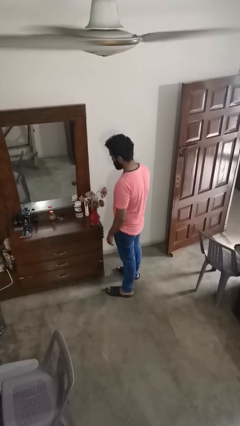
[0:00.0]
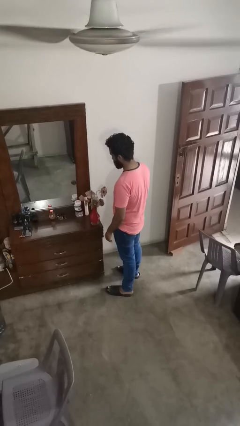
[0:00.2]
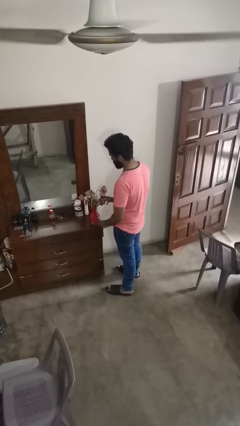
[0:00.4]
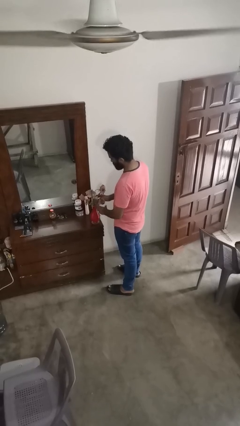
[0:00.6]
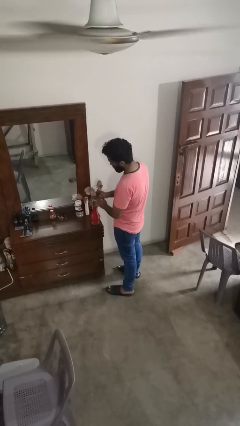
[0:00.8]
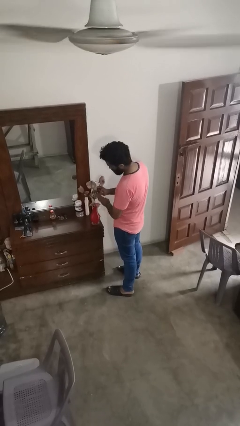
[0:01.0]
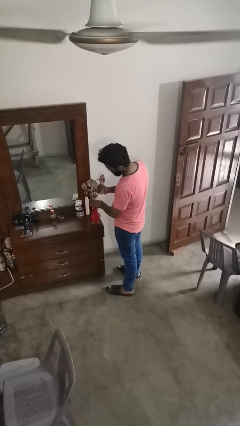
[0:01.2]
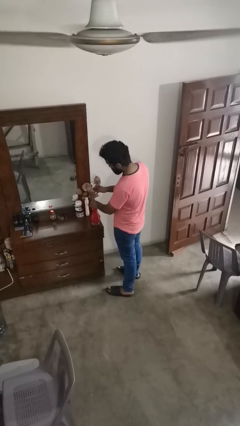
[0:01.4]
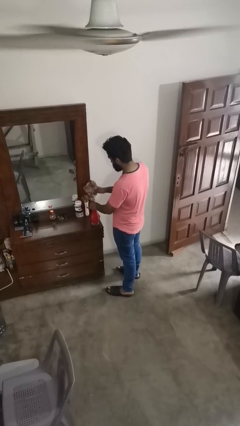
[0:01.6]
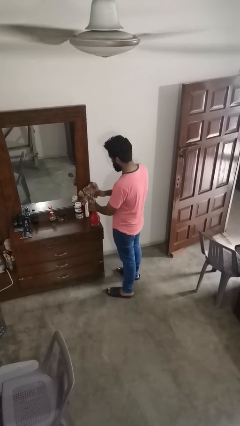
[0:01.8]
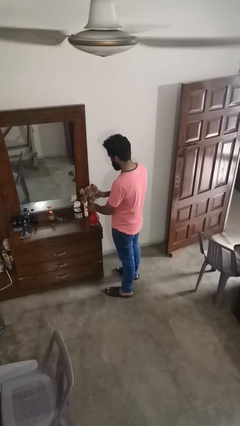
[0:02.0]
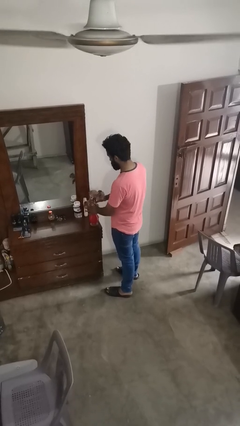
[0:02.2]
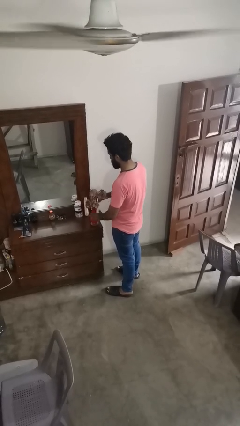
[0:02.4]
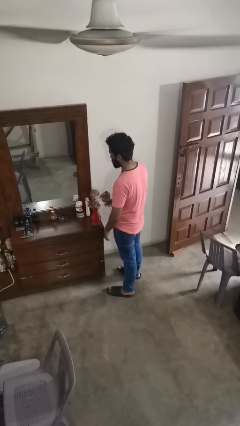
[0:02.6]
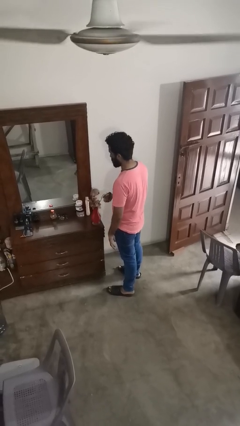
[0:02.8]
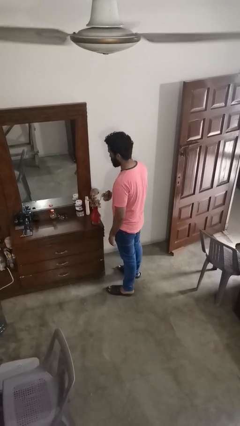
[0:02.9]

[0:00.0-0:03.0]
person arranges flowers in vase

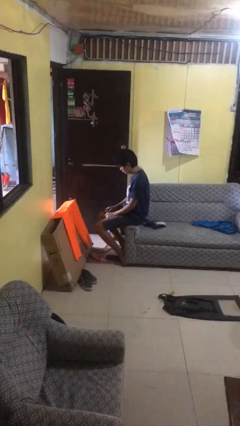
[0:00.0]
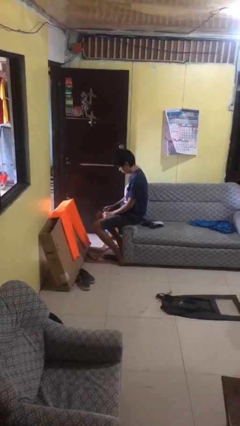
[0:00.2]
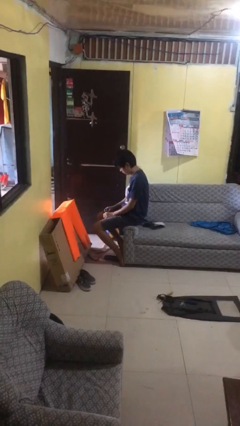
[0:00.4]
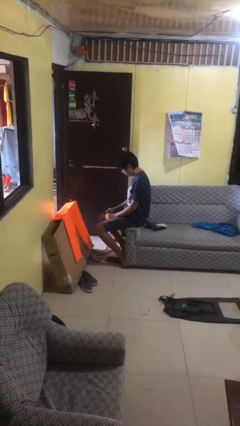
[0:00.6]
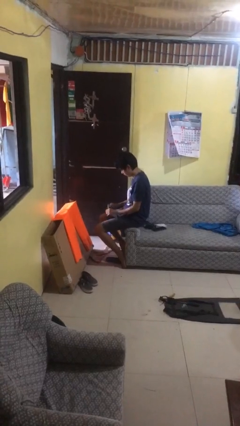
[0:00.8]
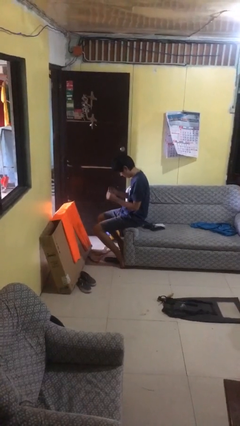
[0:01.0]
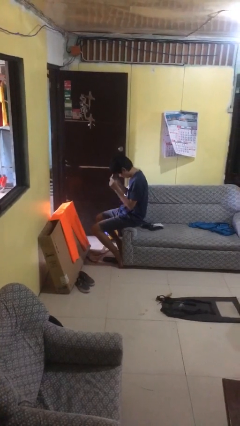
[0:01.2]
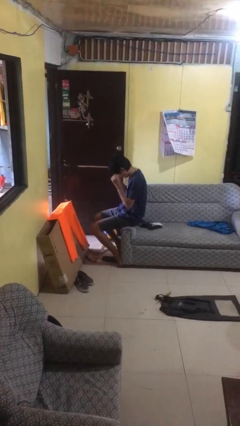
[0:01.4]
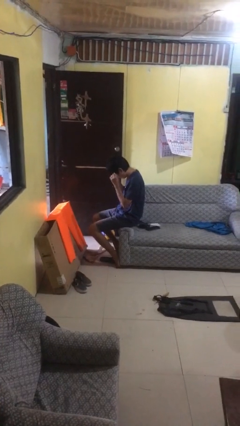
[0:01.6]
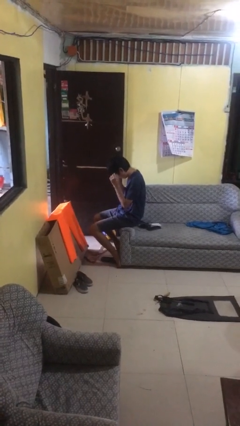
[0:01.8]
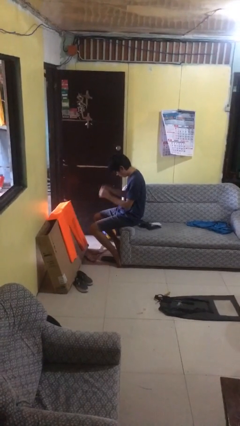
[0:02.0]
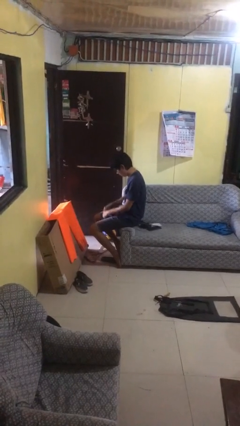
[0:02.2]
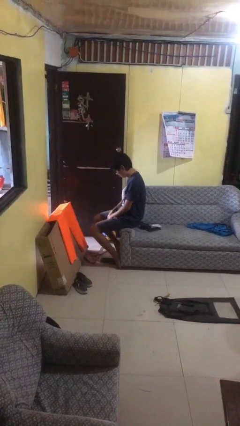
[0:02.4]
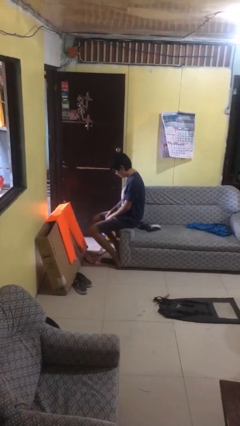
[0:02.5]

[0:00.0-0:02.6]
person puts on glasses

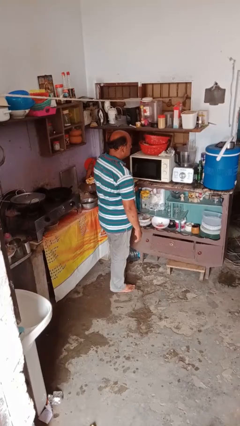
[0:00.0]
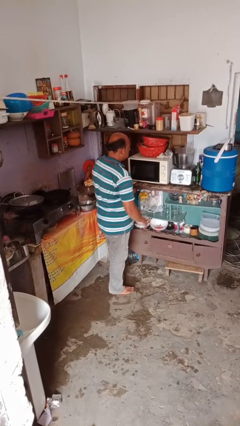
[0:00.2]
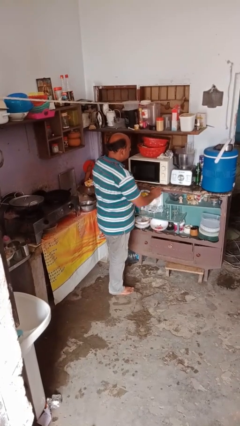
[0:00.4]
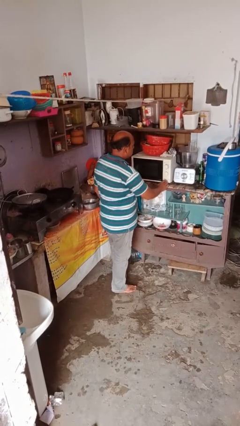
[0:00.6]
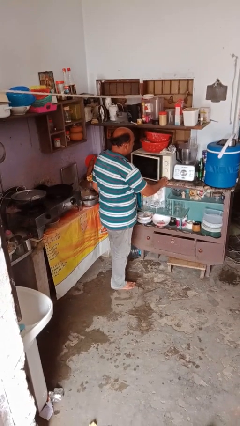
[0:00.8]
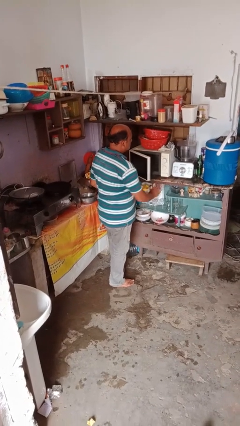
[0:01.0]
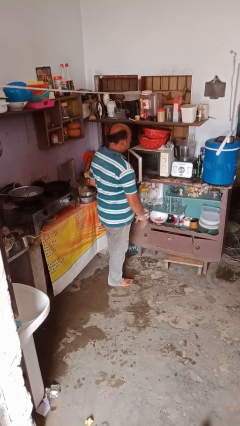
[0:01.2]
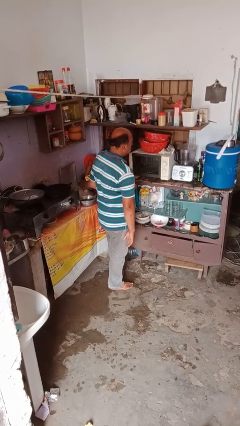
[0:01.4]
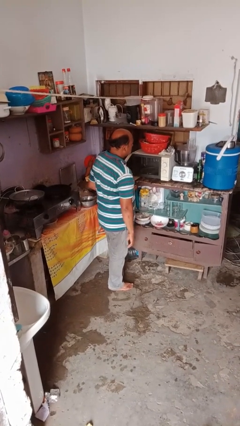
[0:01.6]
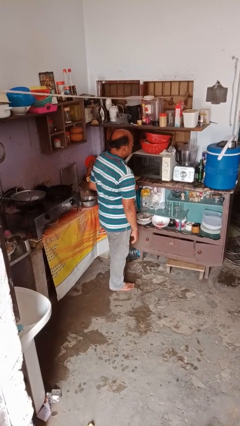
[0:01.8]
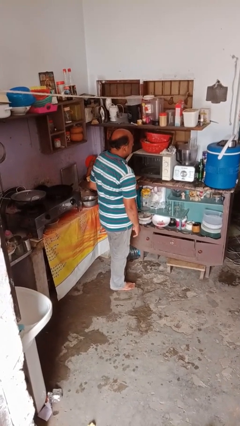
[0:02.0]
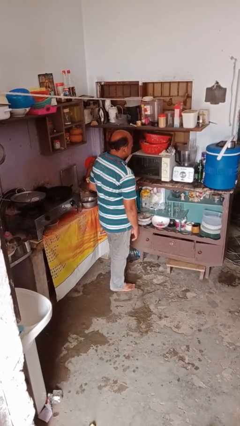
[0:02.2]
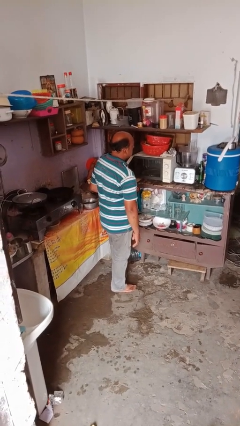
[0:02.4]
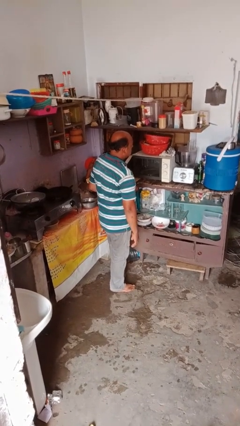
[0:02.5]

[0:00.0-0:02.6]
person opens microwave

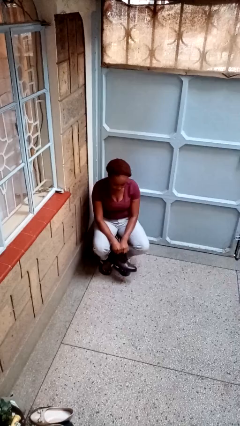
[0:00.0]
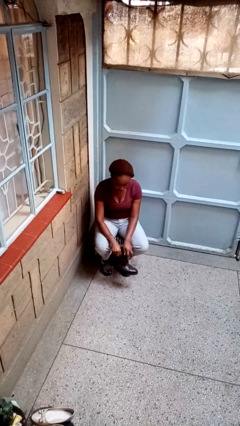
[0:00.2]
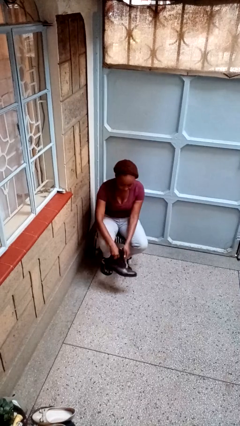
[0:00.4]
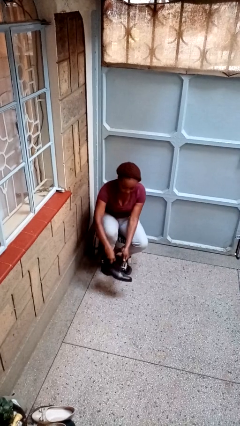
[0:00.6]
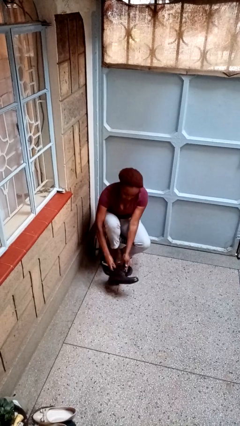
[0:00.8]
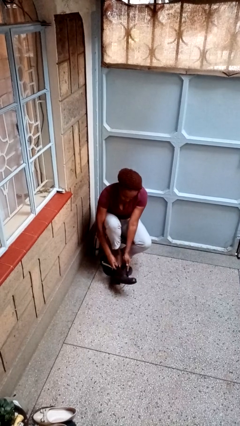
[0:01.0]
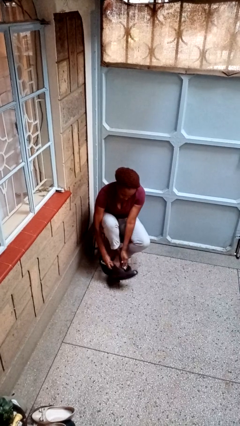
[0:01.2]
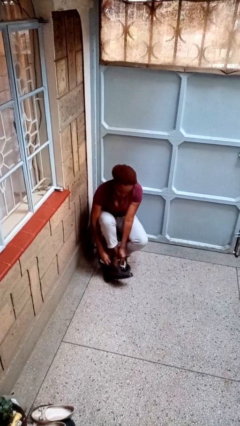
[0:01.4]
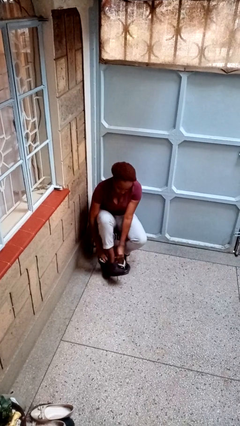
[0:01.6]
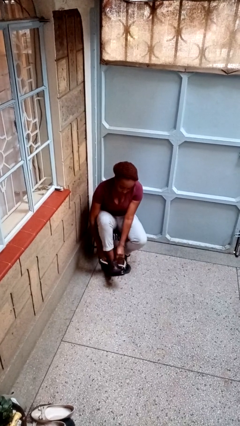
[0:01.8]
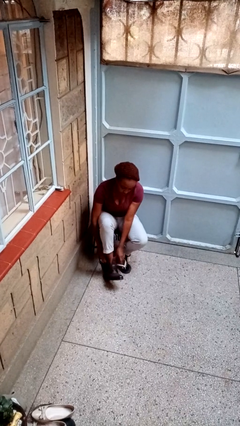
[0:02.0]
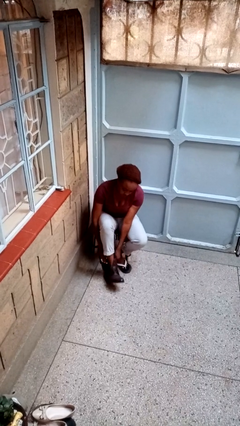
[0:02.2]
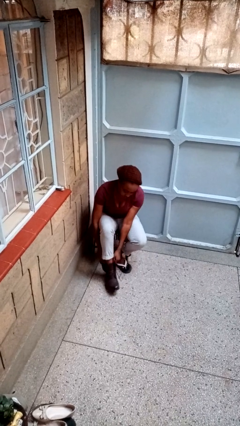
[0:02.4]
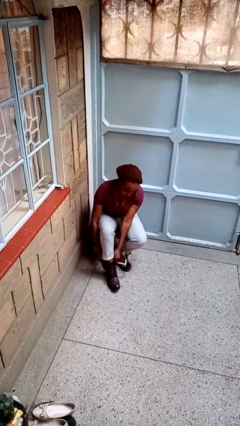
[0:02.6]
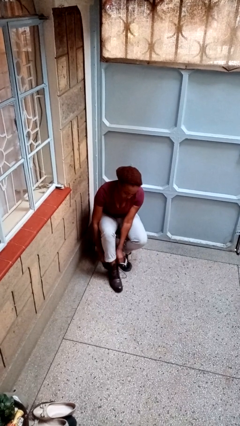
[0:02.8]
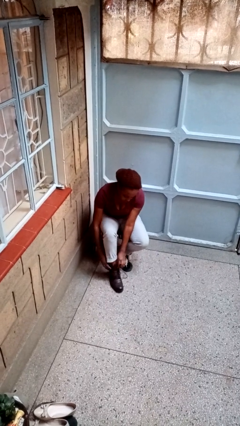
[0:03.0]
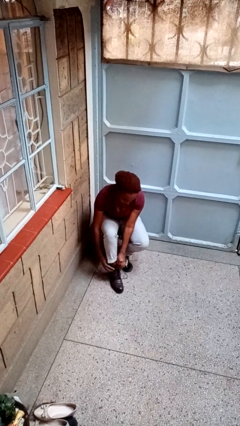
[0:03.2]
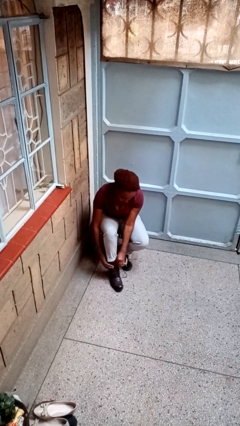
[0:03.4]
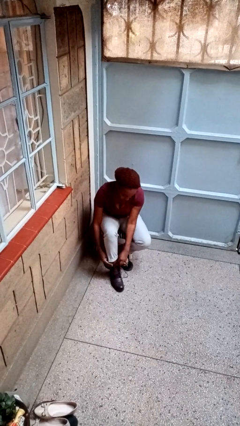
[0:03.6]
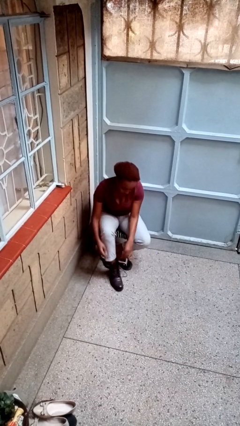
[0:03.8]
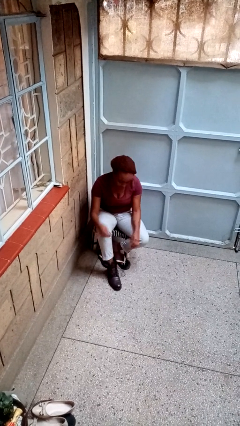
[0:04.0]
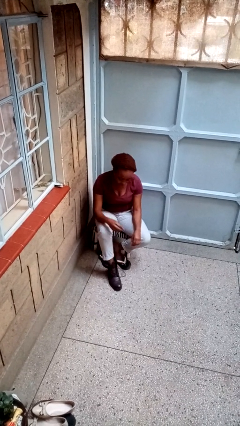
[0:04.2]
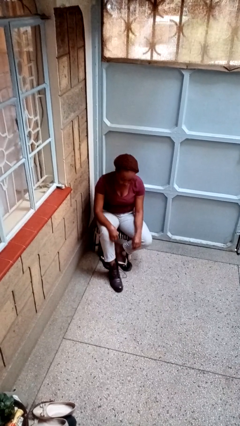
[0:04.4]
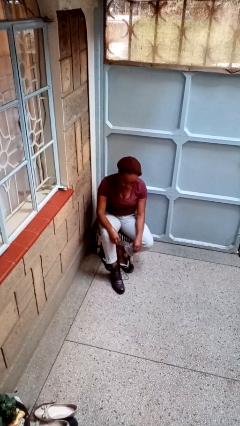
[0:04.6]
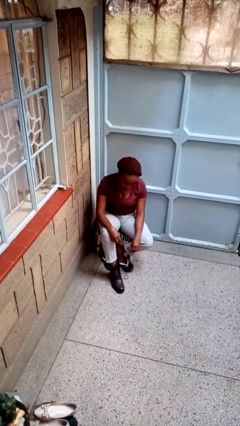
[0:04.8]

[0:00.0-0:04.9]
person puts on boots

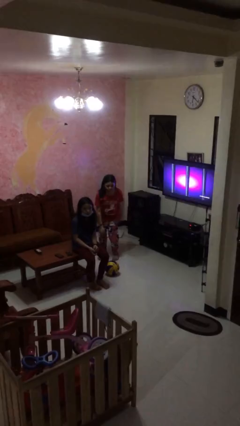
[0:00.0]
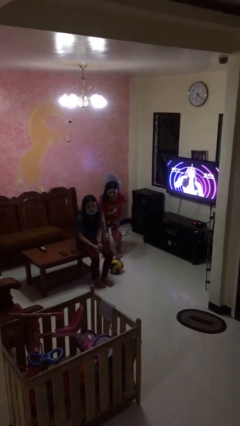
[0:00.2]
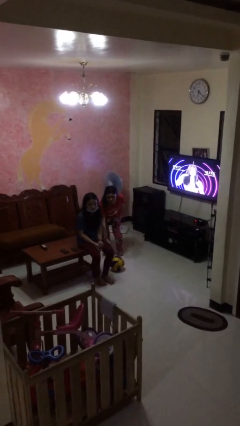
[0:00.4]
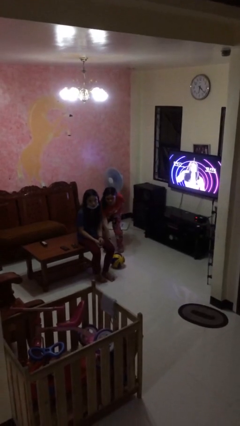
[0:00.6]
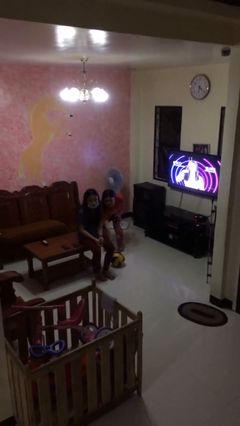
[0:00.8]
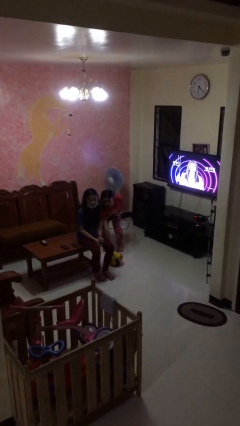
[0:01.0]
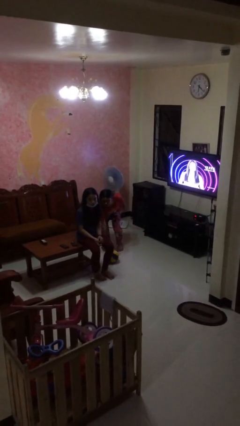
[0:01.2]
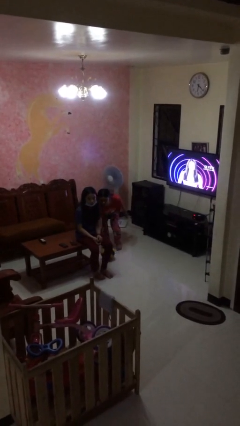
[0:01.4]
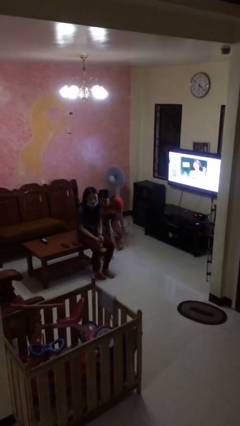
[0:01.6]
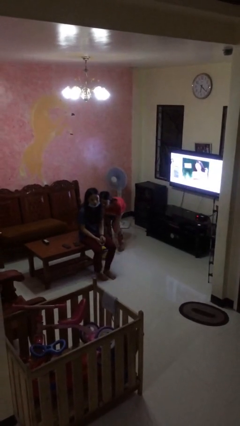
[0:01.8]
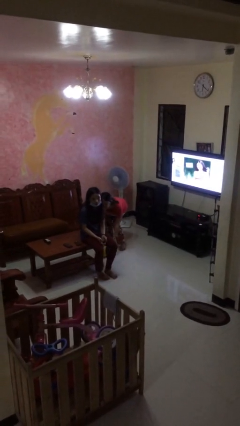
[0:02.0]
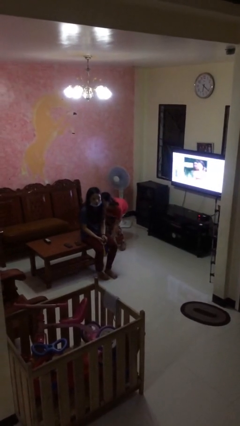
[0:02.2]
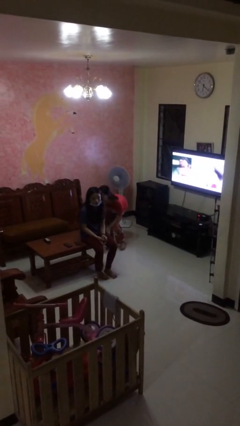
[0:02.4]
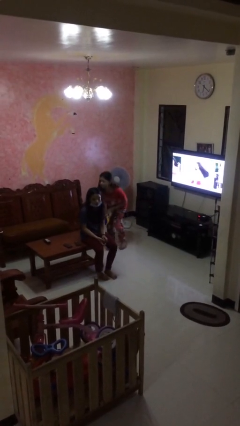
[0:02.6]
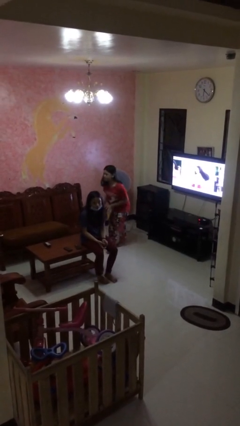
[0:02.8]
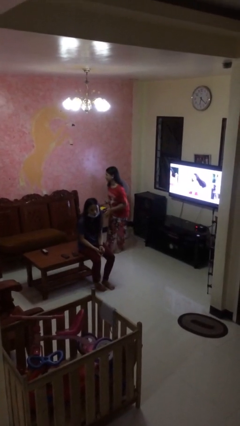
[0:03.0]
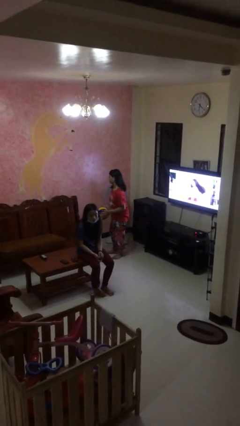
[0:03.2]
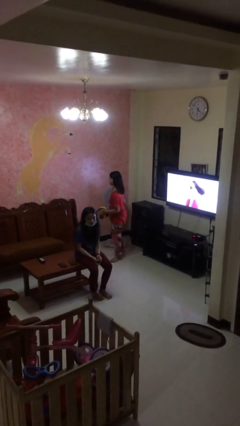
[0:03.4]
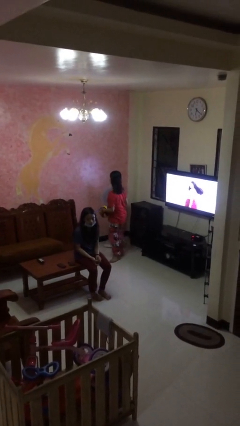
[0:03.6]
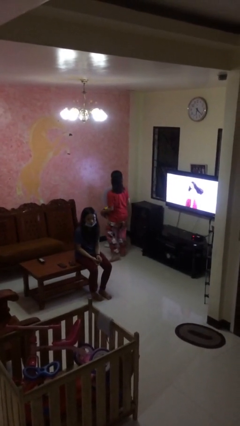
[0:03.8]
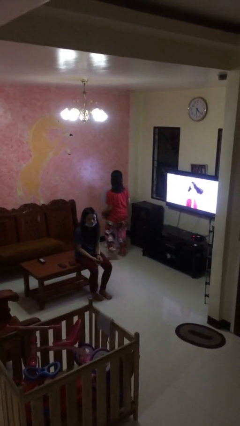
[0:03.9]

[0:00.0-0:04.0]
person steals object from person

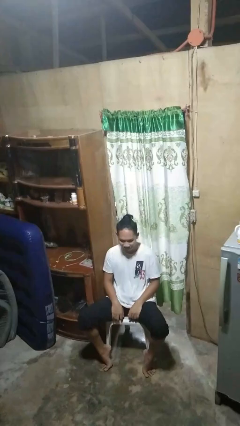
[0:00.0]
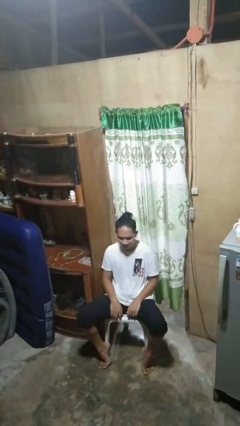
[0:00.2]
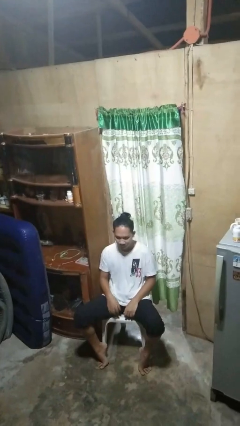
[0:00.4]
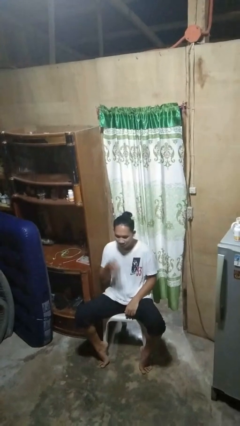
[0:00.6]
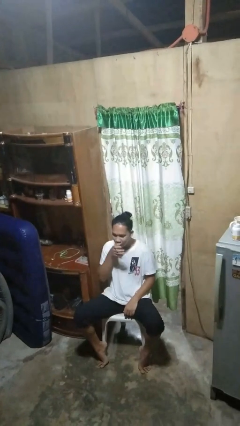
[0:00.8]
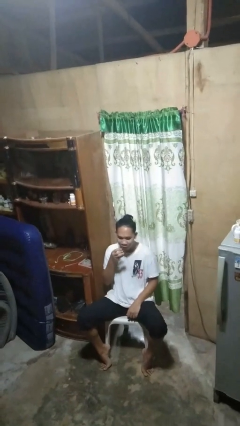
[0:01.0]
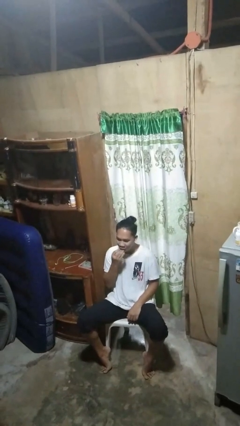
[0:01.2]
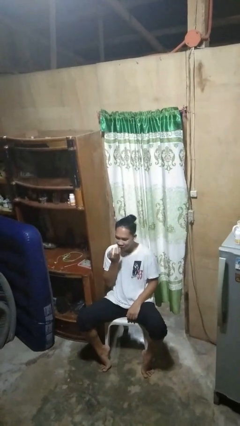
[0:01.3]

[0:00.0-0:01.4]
person licks fingers
